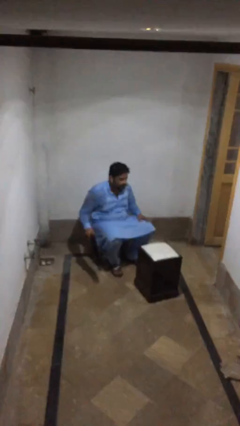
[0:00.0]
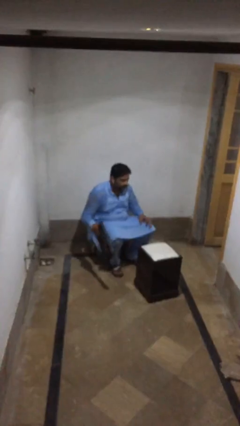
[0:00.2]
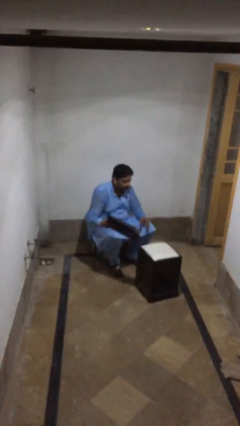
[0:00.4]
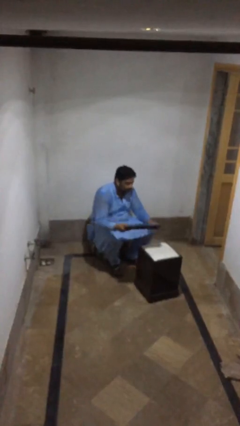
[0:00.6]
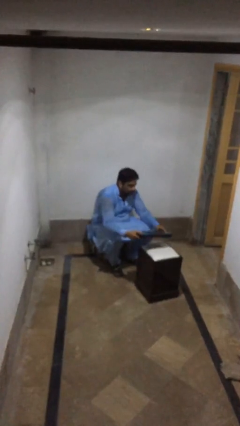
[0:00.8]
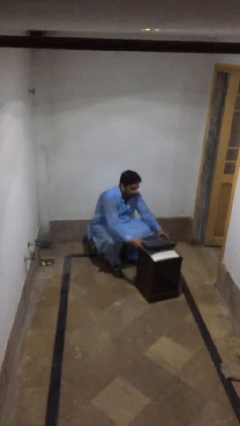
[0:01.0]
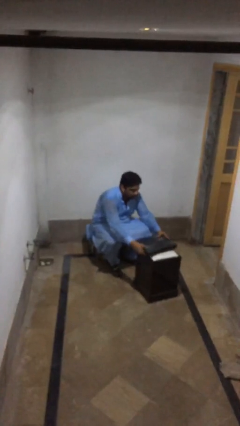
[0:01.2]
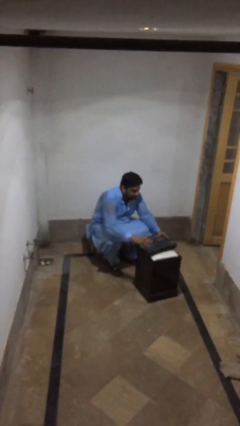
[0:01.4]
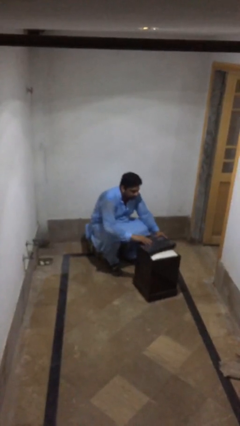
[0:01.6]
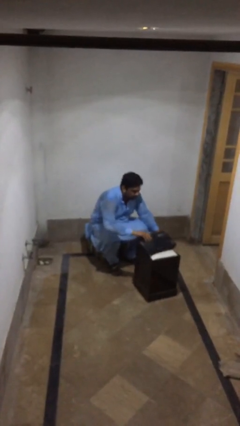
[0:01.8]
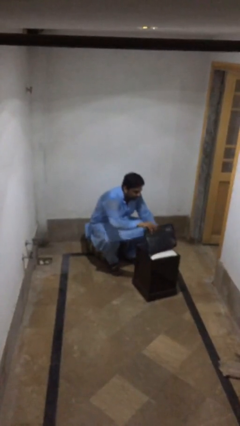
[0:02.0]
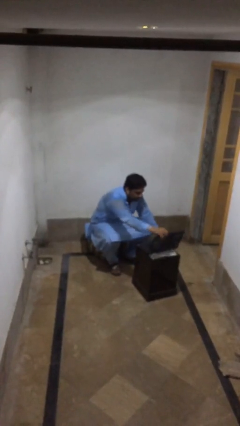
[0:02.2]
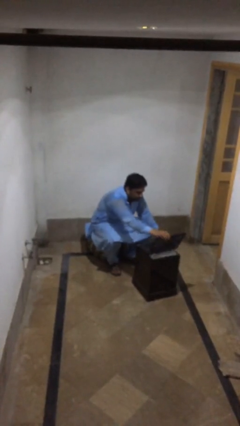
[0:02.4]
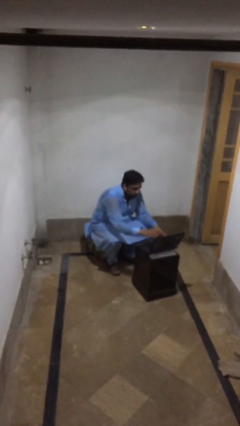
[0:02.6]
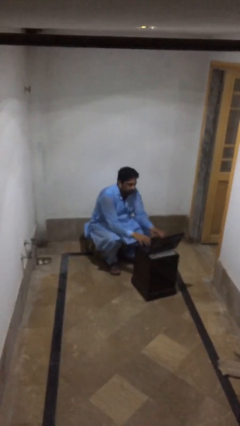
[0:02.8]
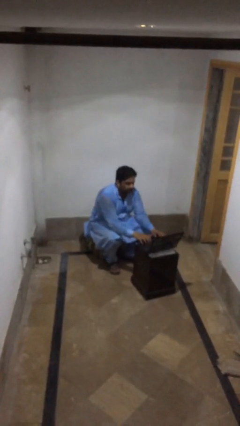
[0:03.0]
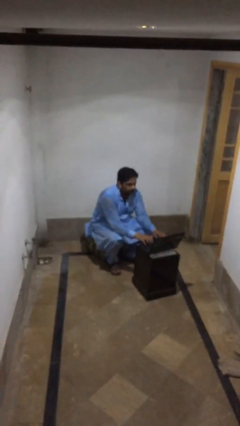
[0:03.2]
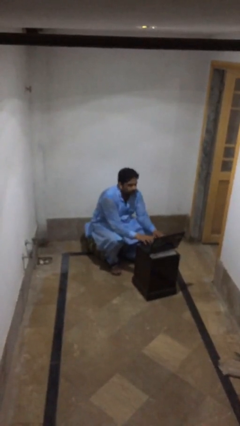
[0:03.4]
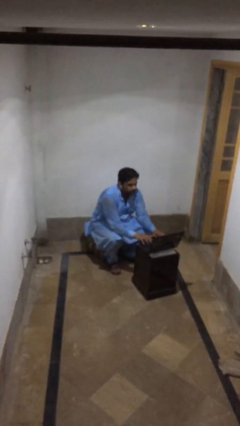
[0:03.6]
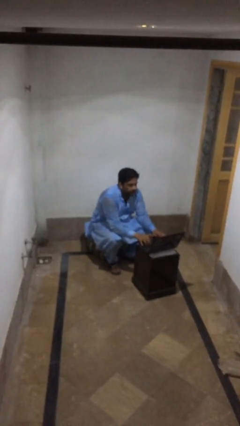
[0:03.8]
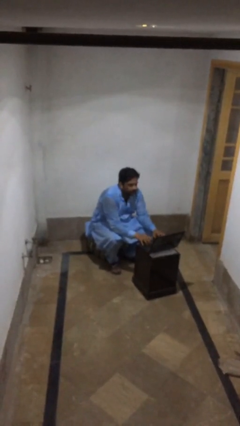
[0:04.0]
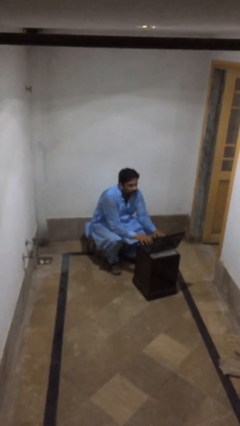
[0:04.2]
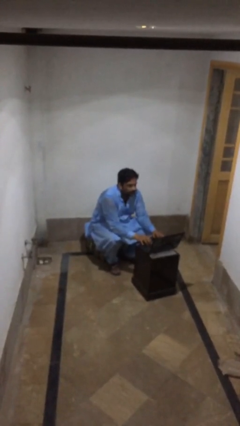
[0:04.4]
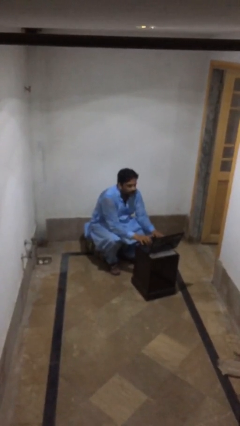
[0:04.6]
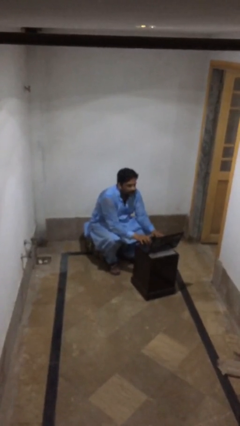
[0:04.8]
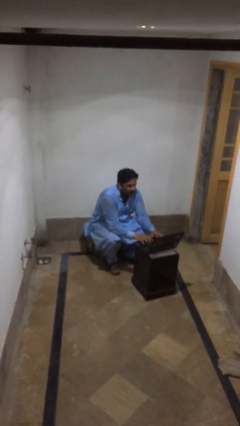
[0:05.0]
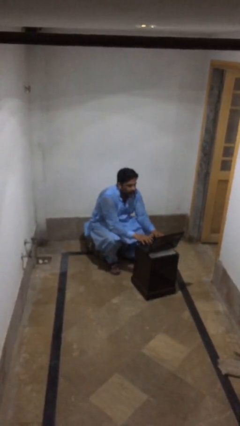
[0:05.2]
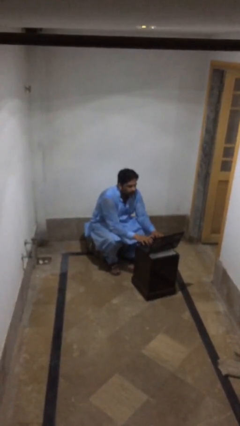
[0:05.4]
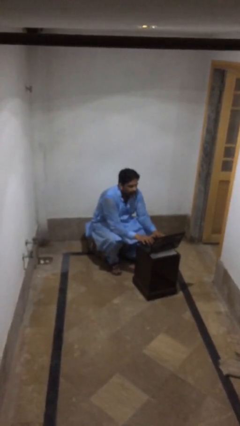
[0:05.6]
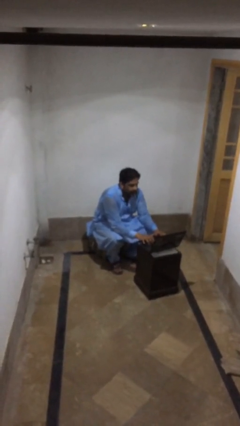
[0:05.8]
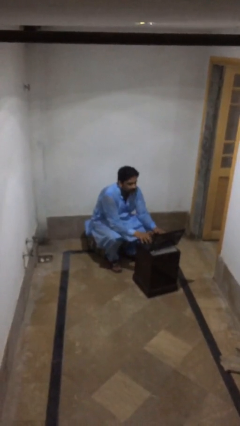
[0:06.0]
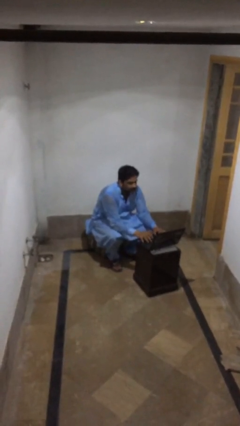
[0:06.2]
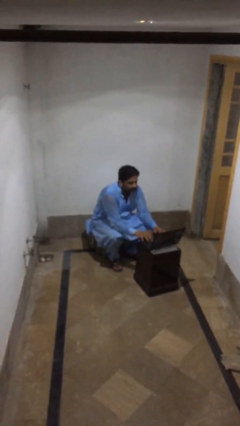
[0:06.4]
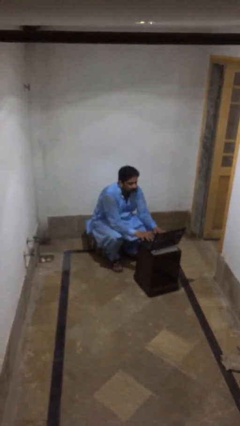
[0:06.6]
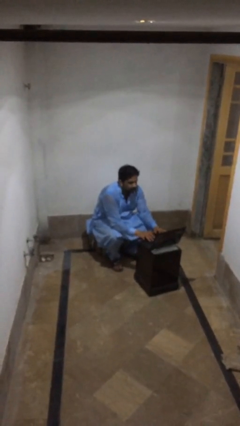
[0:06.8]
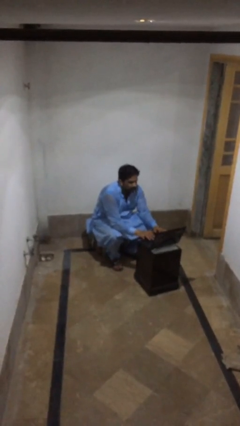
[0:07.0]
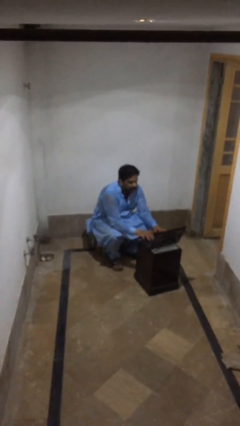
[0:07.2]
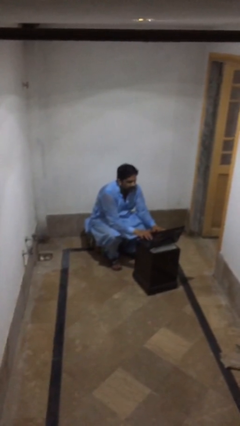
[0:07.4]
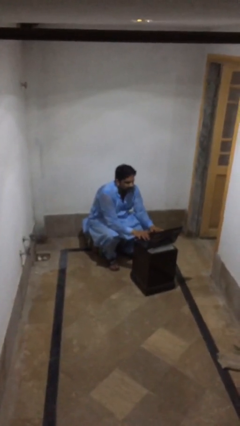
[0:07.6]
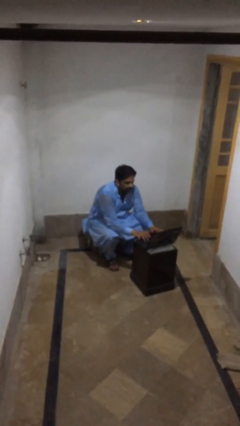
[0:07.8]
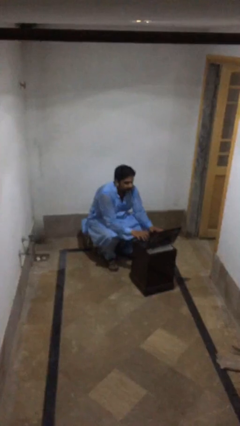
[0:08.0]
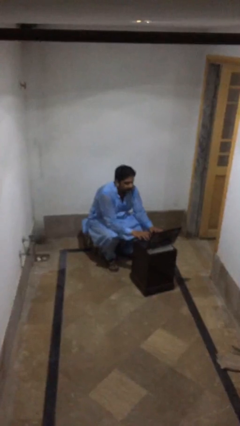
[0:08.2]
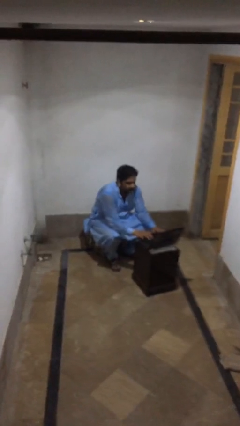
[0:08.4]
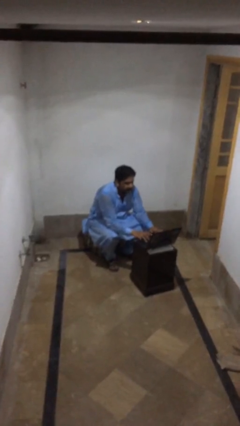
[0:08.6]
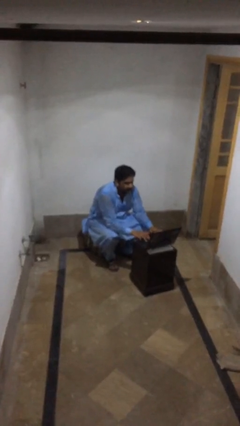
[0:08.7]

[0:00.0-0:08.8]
person interacts with laptop

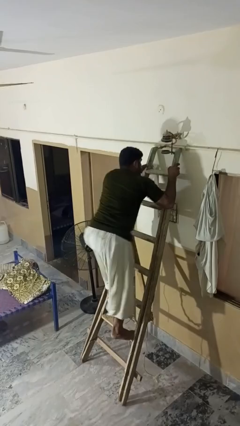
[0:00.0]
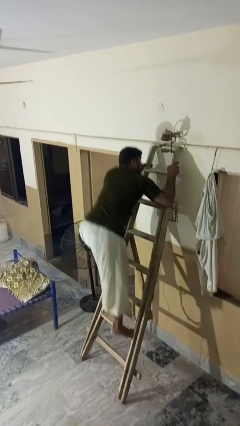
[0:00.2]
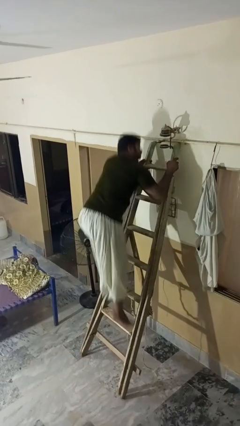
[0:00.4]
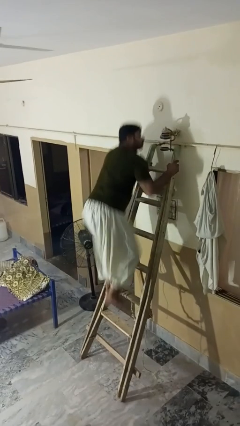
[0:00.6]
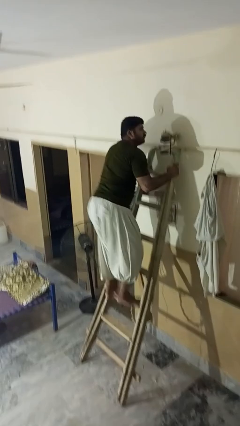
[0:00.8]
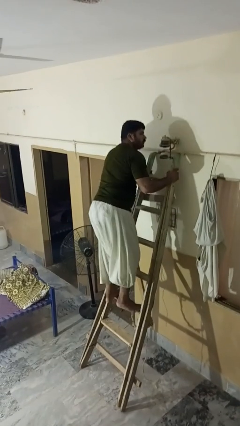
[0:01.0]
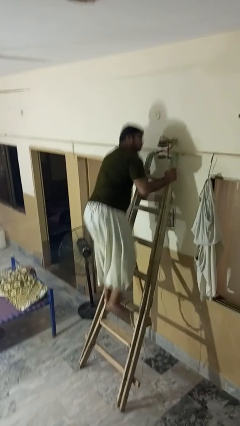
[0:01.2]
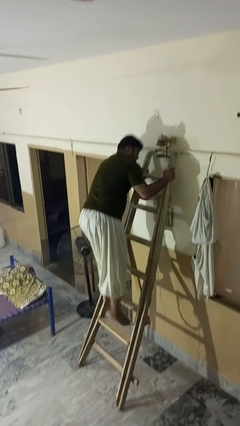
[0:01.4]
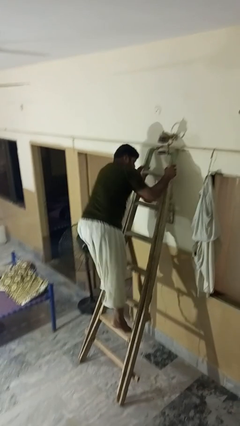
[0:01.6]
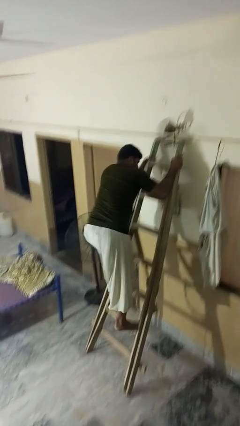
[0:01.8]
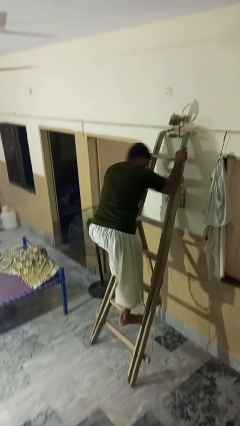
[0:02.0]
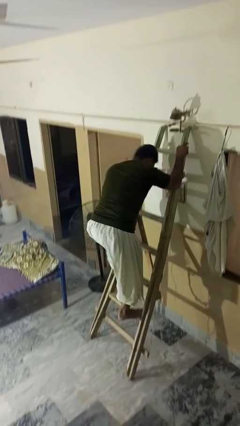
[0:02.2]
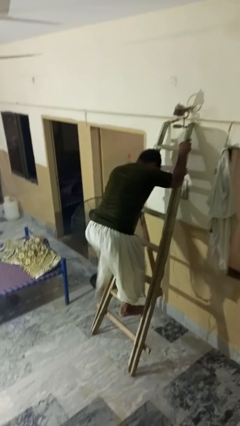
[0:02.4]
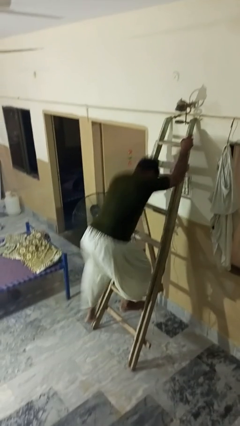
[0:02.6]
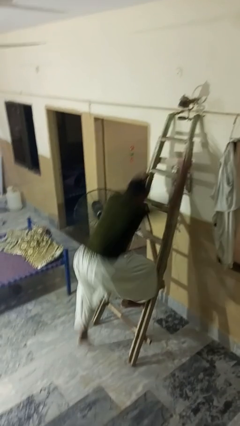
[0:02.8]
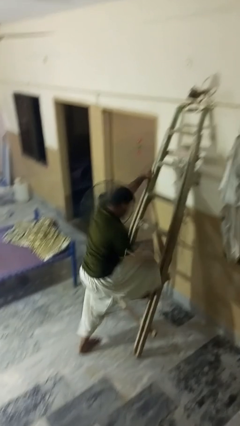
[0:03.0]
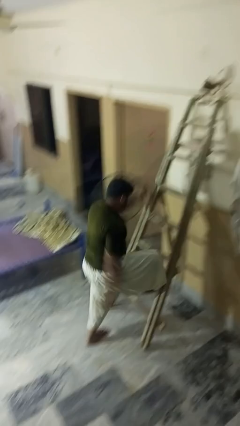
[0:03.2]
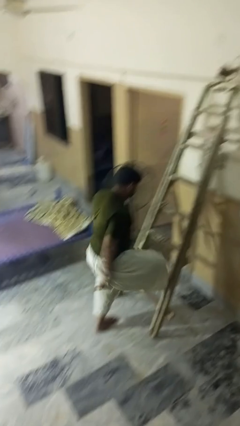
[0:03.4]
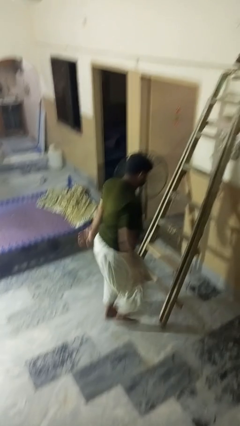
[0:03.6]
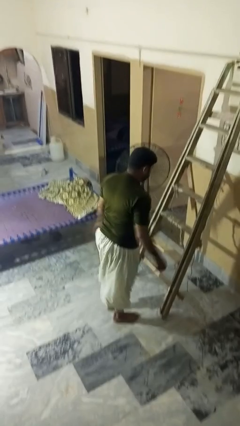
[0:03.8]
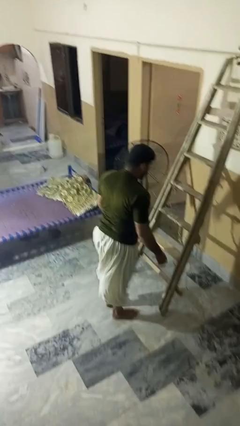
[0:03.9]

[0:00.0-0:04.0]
person climbs down ladder

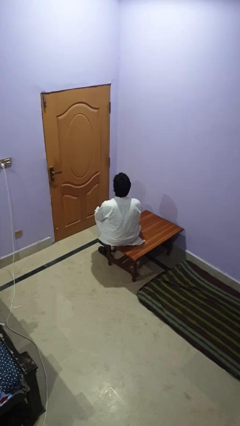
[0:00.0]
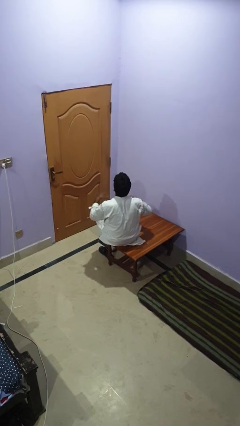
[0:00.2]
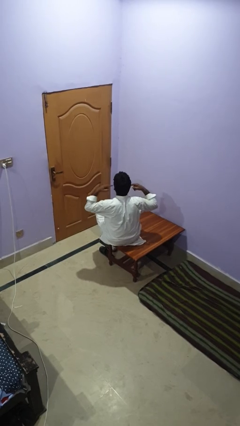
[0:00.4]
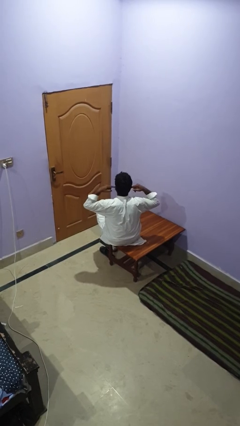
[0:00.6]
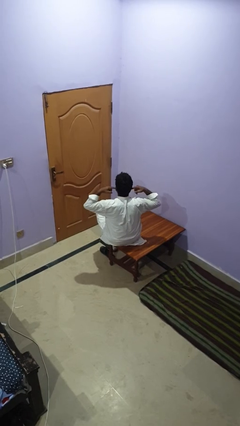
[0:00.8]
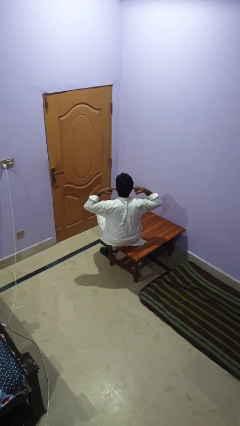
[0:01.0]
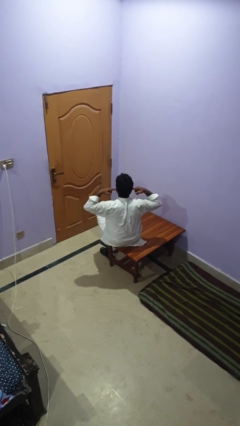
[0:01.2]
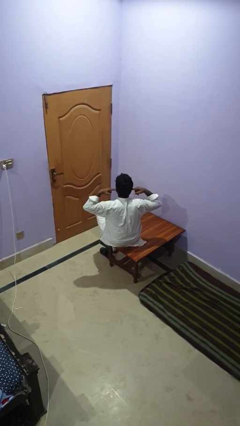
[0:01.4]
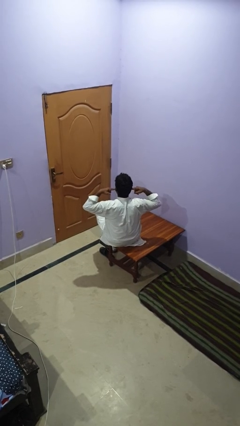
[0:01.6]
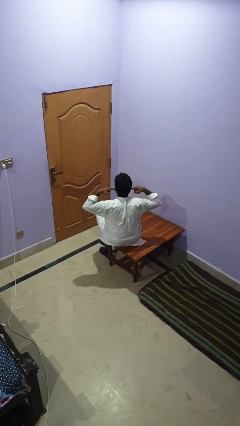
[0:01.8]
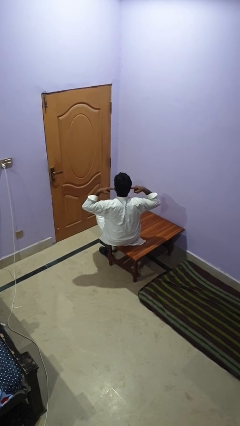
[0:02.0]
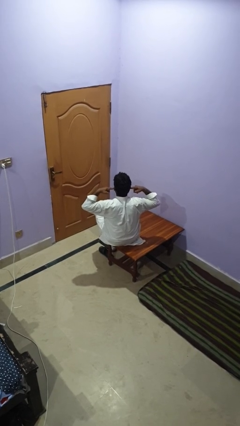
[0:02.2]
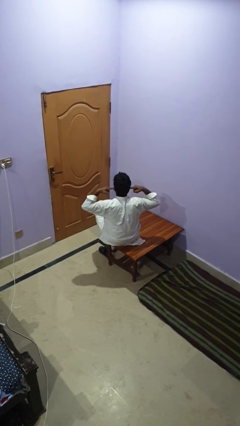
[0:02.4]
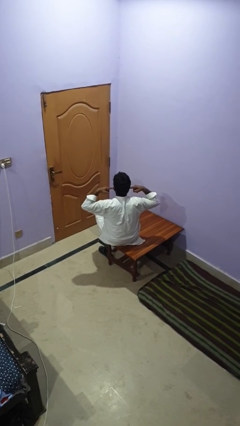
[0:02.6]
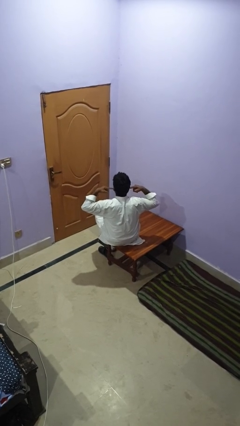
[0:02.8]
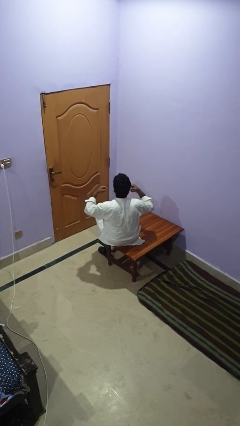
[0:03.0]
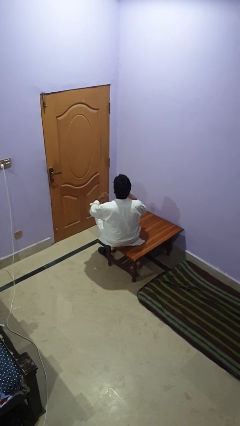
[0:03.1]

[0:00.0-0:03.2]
person puts fingers in ear

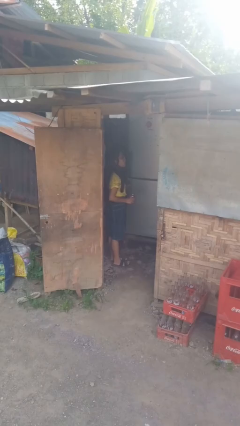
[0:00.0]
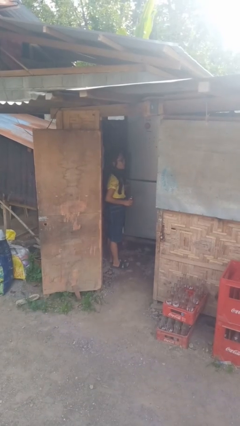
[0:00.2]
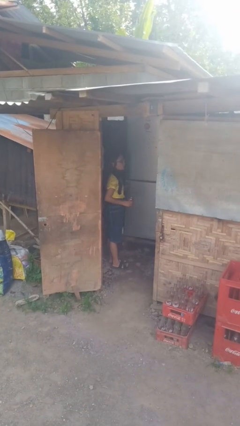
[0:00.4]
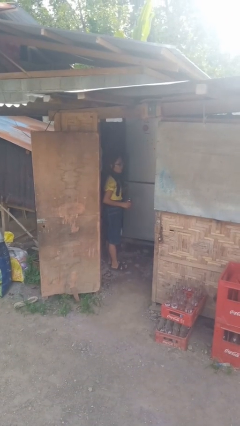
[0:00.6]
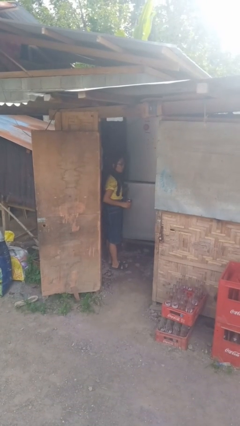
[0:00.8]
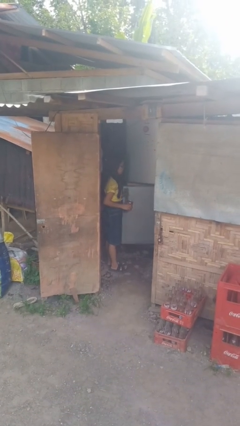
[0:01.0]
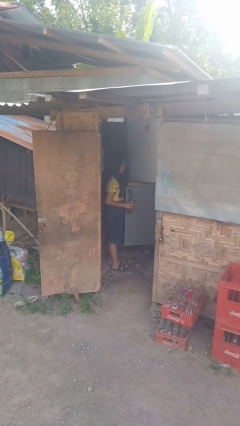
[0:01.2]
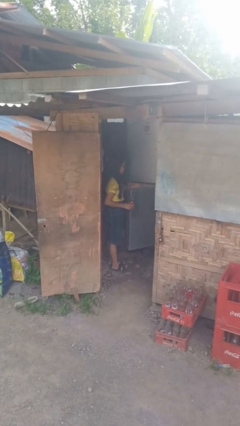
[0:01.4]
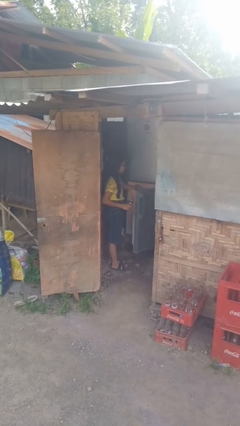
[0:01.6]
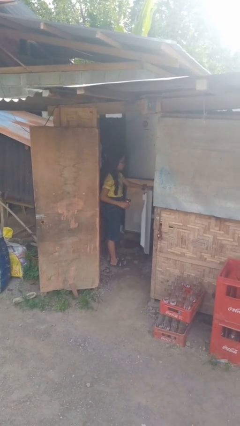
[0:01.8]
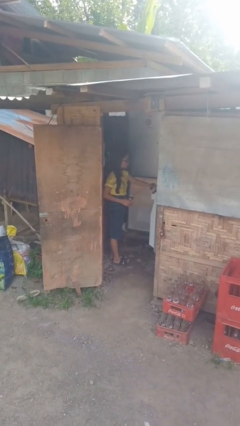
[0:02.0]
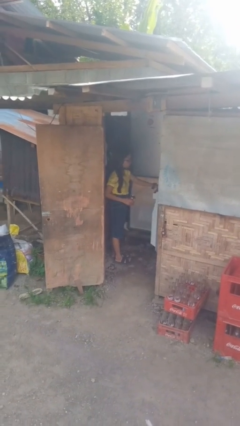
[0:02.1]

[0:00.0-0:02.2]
person opens refrigerator
